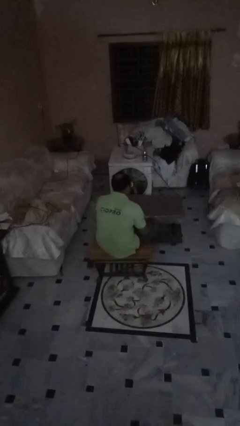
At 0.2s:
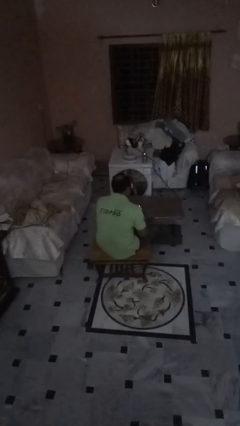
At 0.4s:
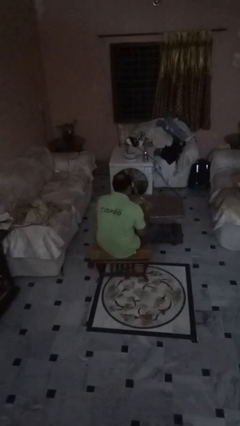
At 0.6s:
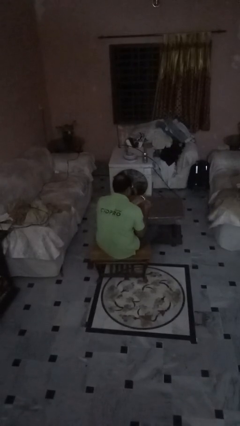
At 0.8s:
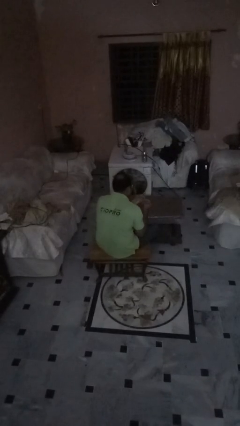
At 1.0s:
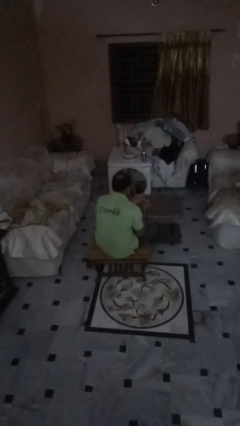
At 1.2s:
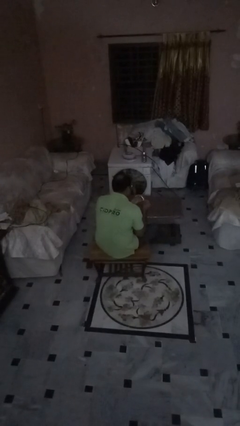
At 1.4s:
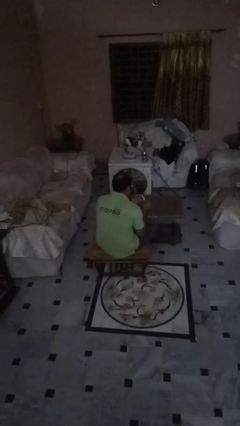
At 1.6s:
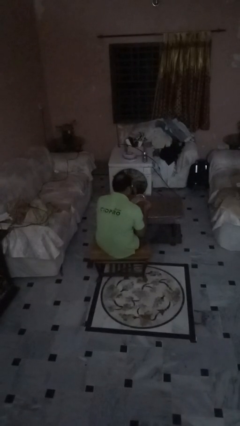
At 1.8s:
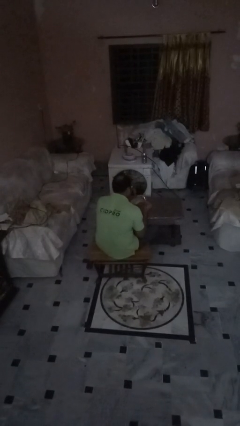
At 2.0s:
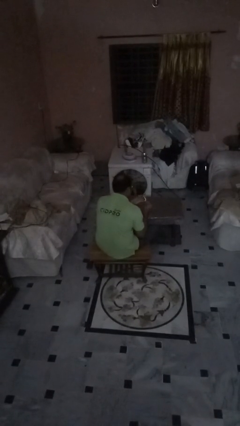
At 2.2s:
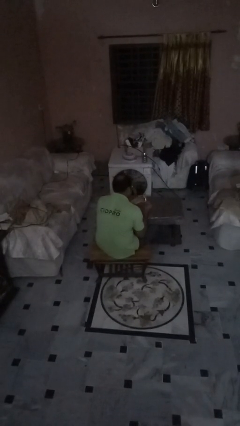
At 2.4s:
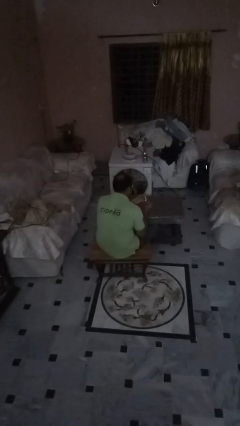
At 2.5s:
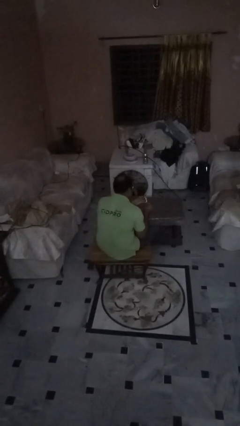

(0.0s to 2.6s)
person clips fingernails

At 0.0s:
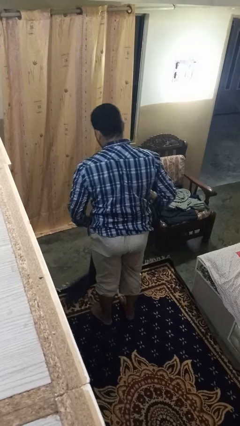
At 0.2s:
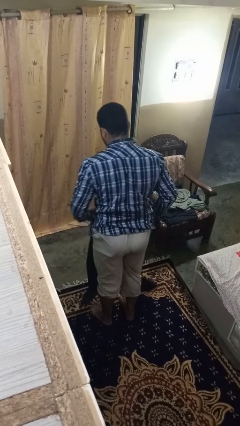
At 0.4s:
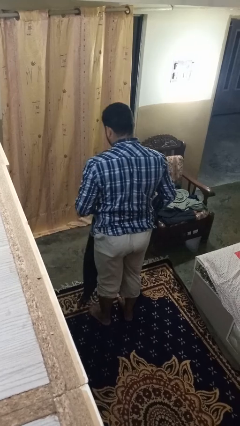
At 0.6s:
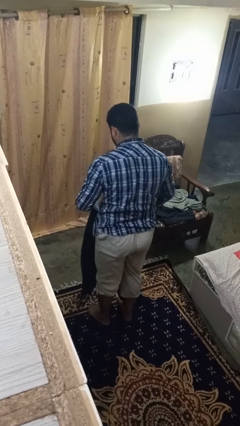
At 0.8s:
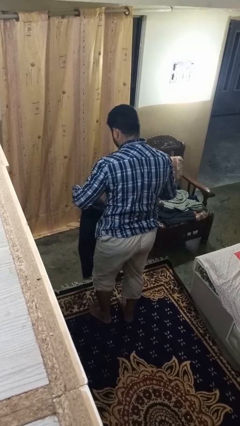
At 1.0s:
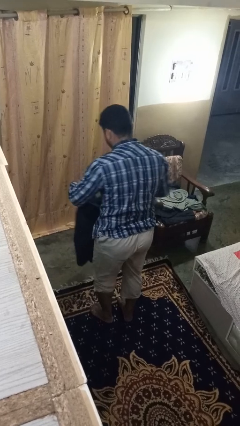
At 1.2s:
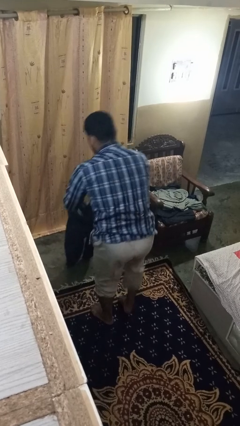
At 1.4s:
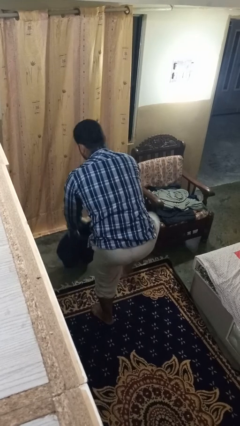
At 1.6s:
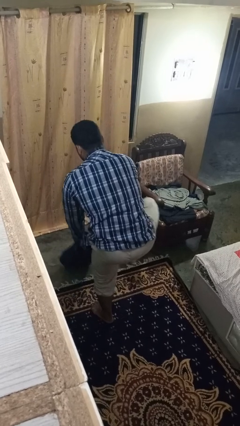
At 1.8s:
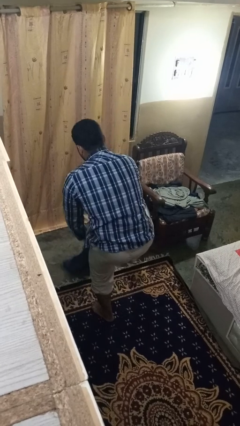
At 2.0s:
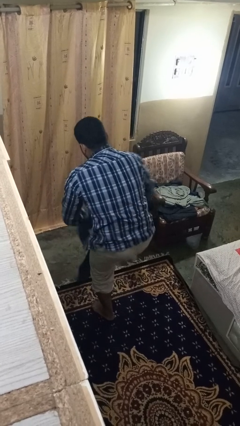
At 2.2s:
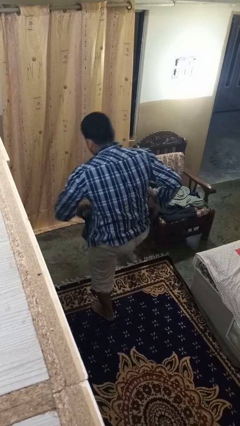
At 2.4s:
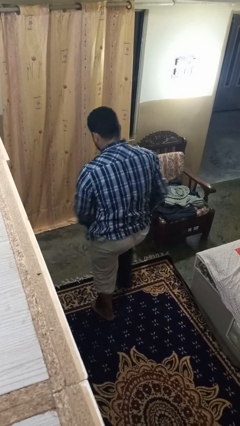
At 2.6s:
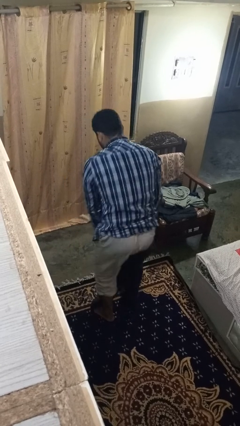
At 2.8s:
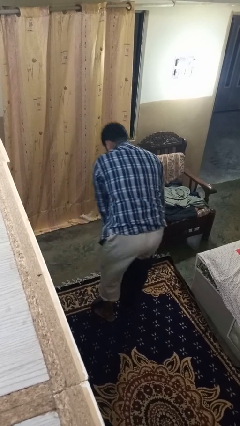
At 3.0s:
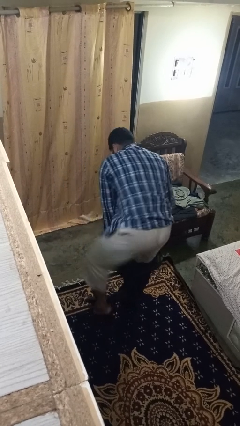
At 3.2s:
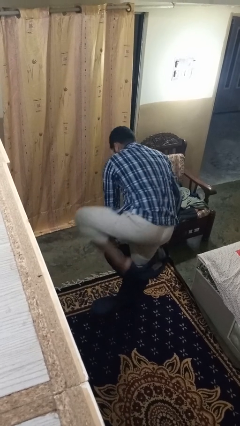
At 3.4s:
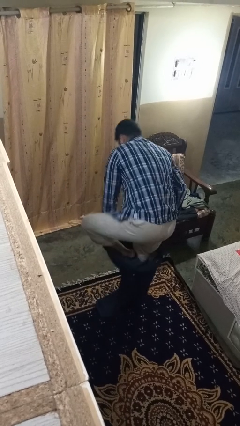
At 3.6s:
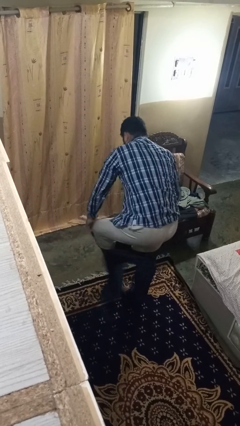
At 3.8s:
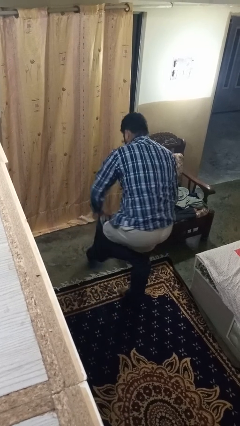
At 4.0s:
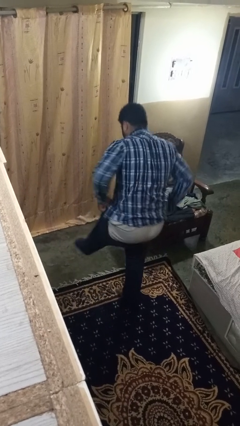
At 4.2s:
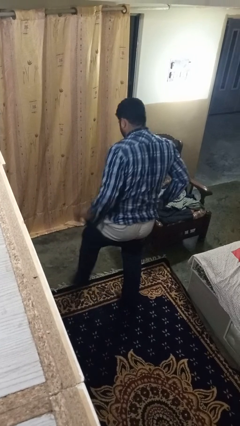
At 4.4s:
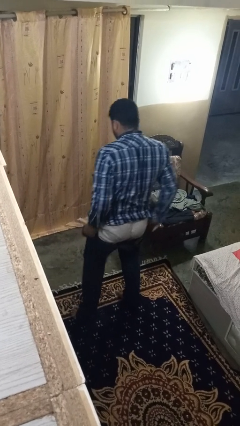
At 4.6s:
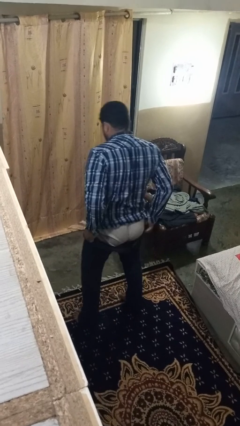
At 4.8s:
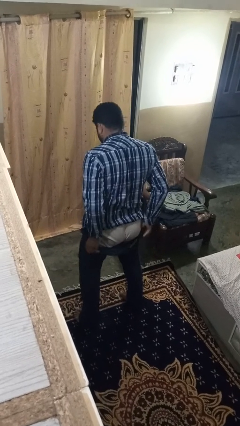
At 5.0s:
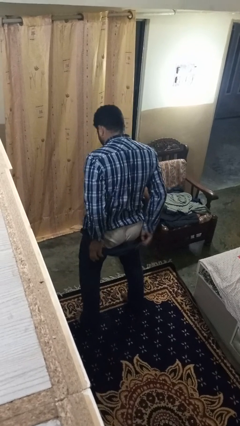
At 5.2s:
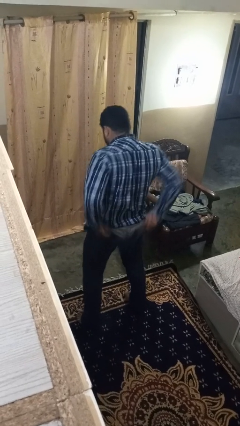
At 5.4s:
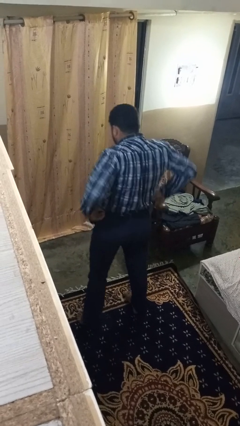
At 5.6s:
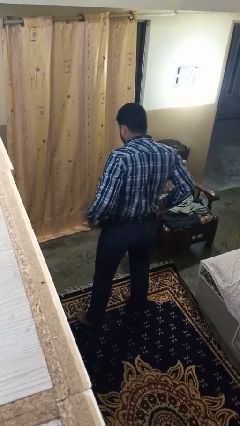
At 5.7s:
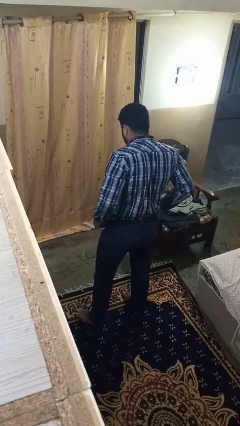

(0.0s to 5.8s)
person puts on pants

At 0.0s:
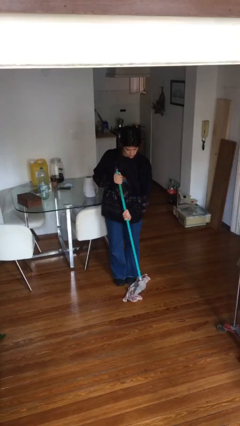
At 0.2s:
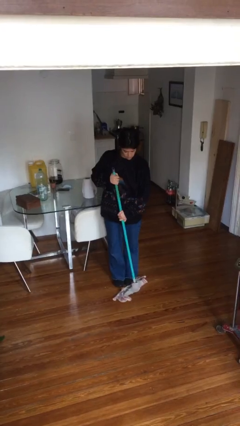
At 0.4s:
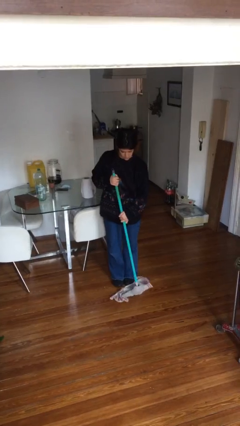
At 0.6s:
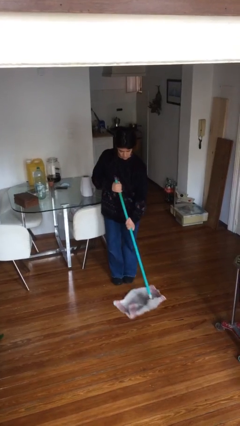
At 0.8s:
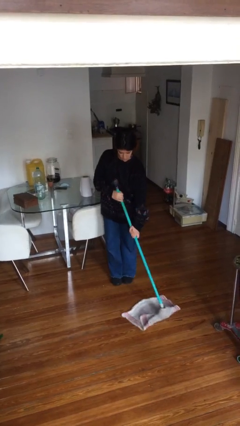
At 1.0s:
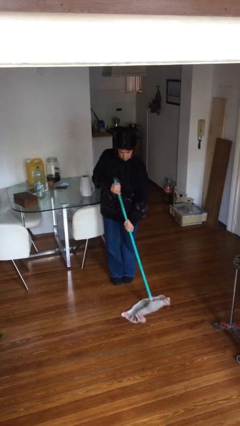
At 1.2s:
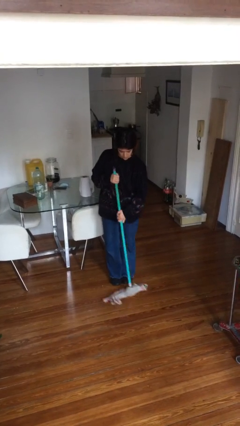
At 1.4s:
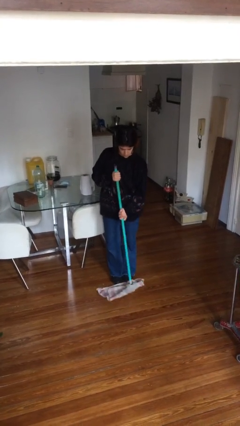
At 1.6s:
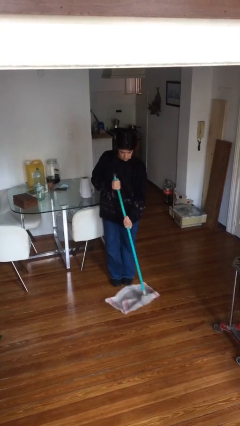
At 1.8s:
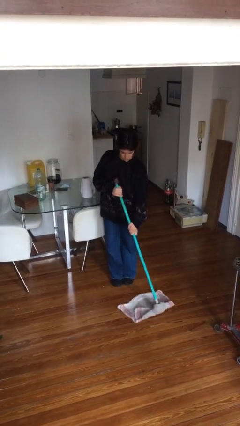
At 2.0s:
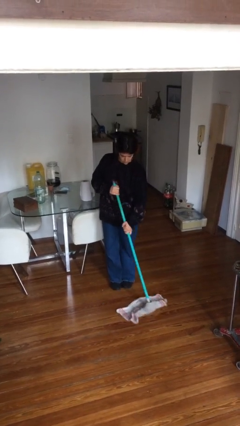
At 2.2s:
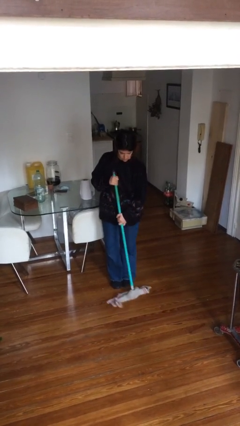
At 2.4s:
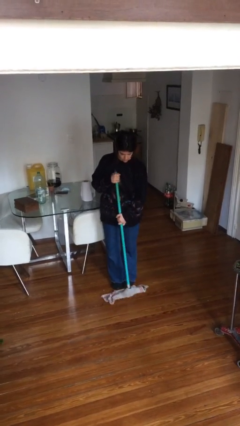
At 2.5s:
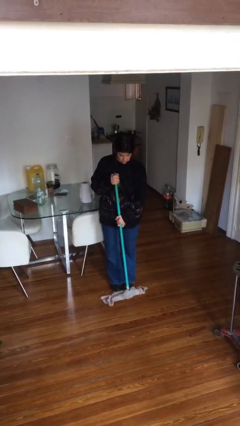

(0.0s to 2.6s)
person mops

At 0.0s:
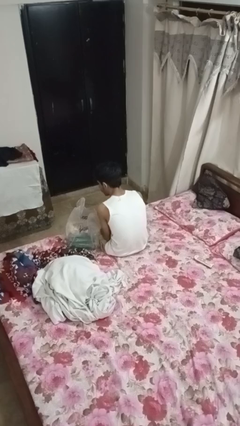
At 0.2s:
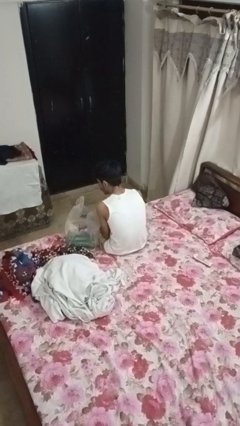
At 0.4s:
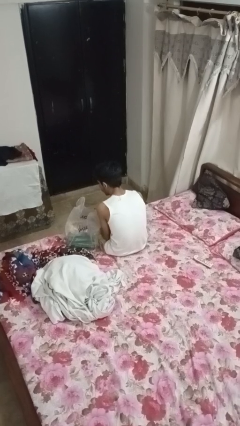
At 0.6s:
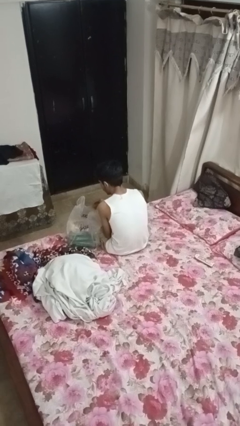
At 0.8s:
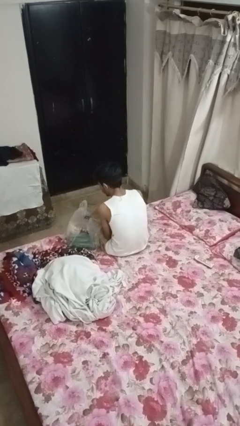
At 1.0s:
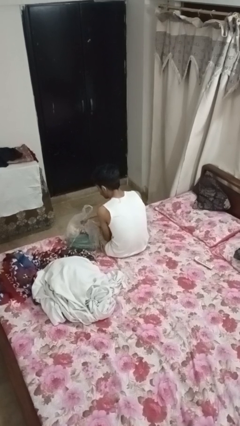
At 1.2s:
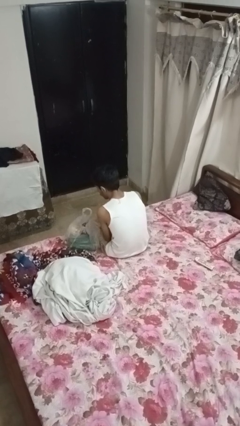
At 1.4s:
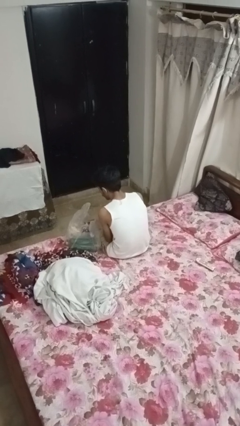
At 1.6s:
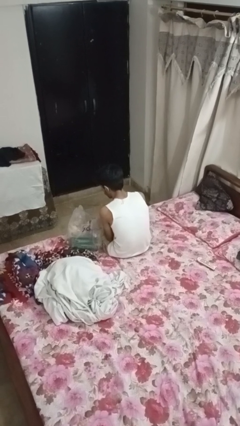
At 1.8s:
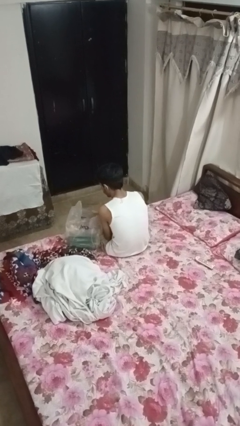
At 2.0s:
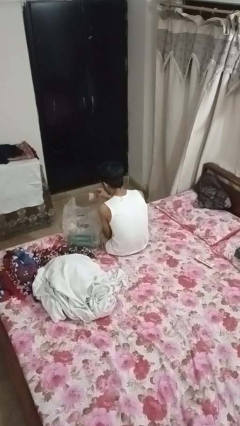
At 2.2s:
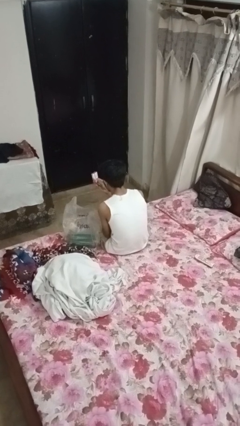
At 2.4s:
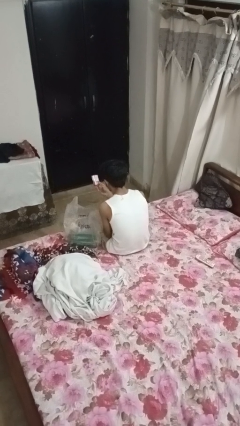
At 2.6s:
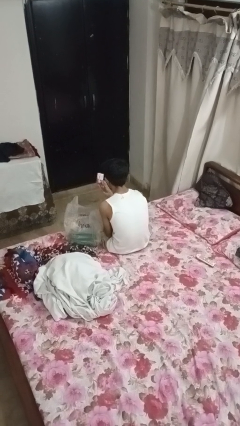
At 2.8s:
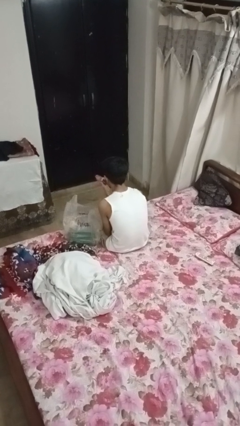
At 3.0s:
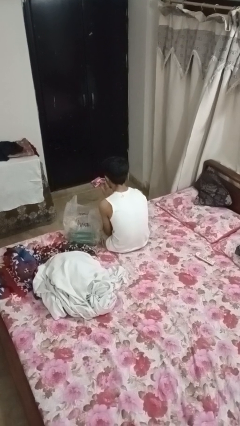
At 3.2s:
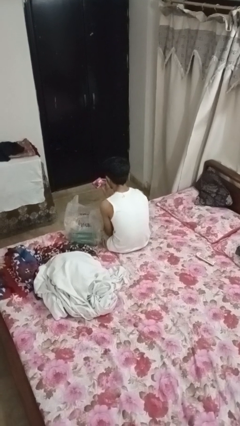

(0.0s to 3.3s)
person takes object from bag

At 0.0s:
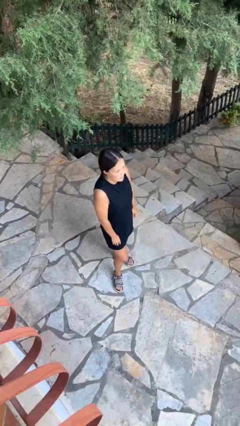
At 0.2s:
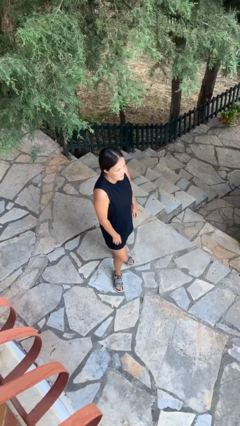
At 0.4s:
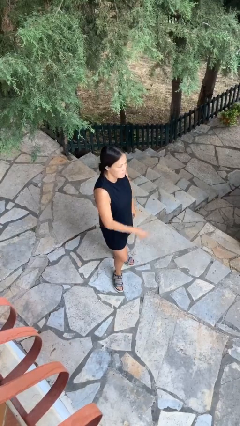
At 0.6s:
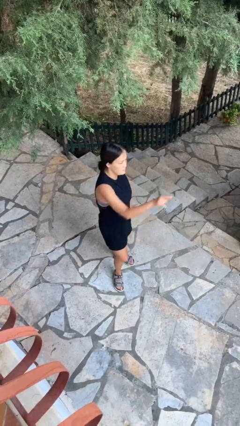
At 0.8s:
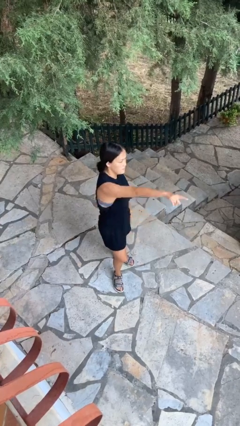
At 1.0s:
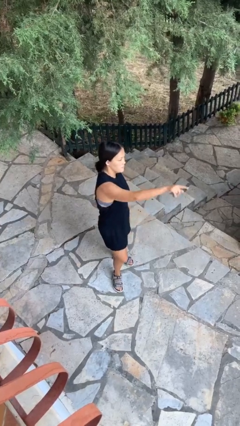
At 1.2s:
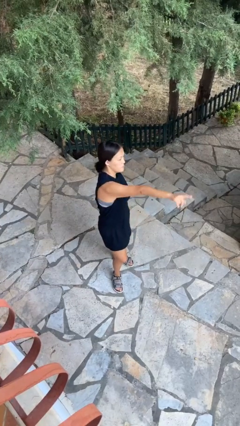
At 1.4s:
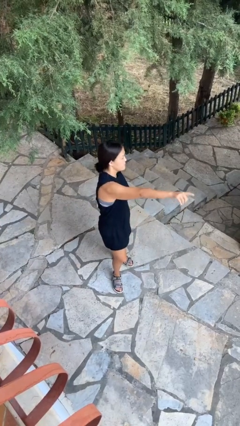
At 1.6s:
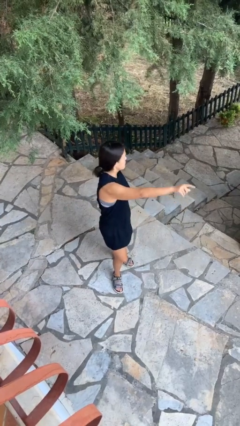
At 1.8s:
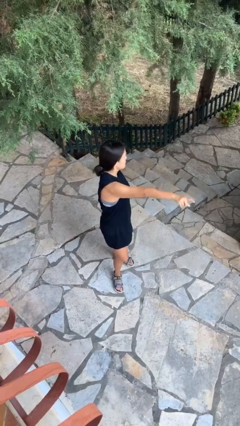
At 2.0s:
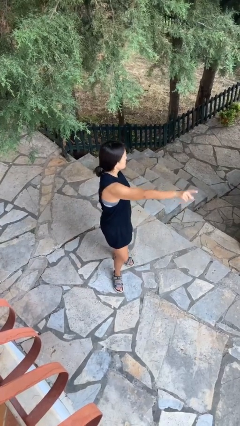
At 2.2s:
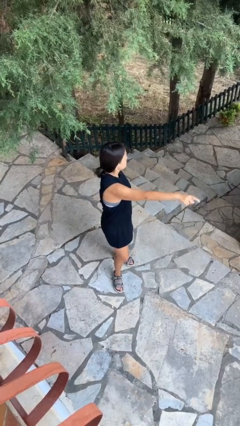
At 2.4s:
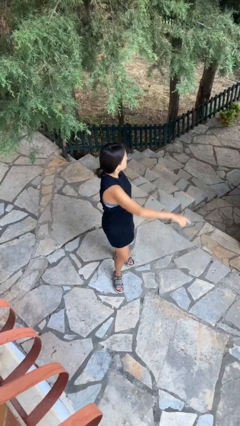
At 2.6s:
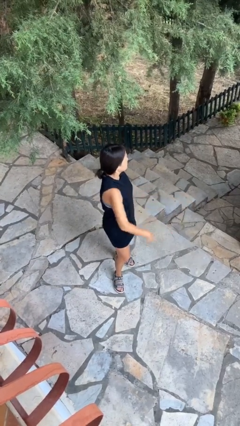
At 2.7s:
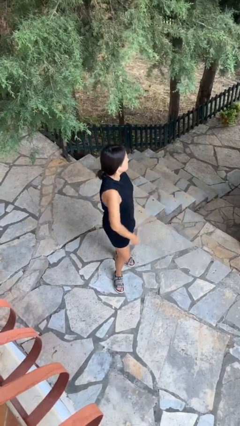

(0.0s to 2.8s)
person points at person

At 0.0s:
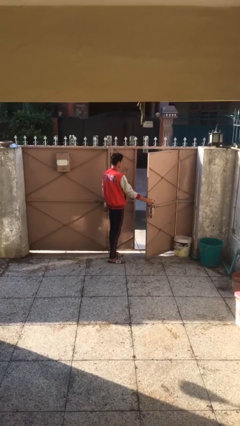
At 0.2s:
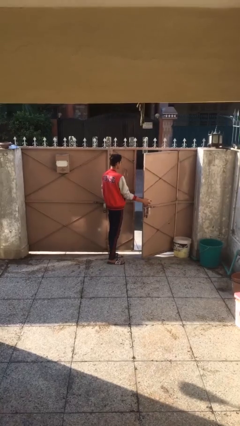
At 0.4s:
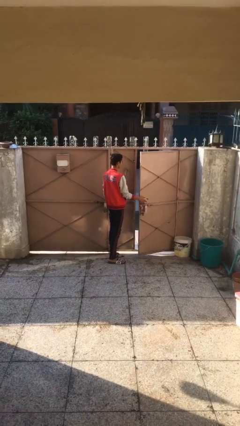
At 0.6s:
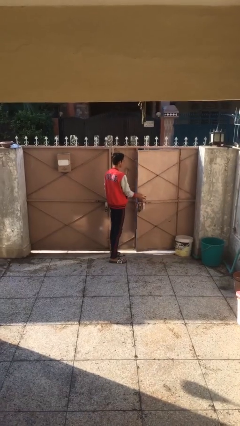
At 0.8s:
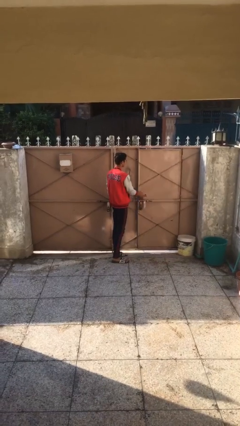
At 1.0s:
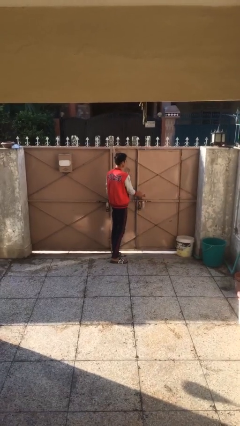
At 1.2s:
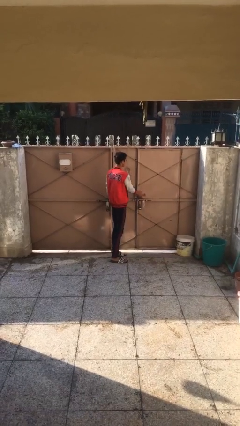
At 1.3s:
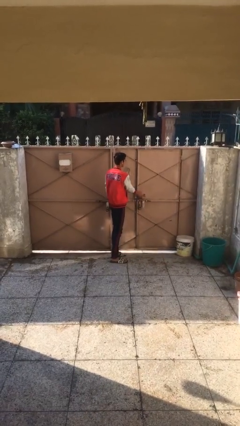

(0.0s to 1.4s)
person closes facility door
